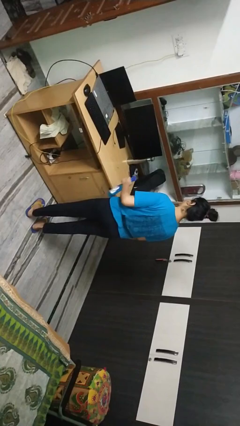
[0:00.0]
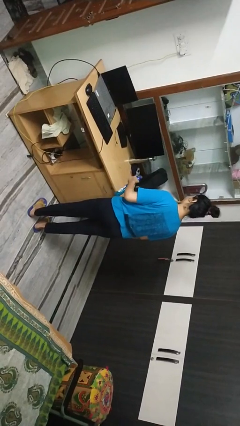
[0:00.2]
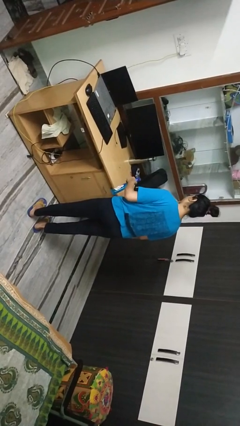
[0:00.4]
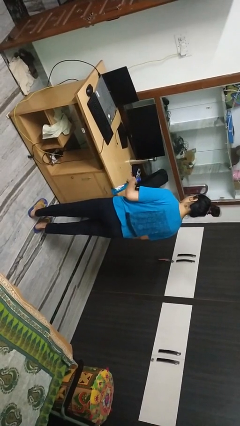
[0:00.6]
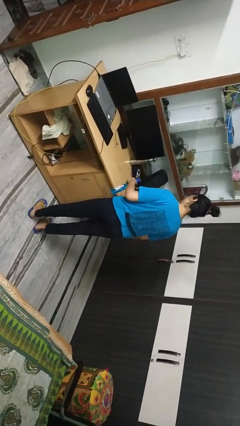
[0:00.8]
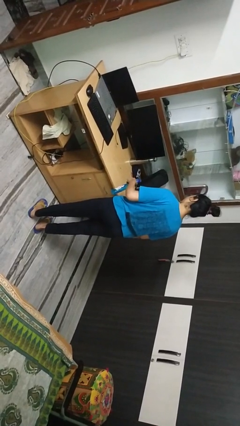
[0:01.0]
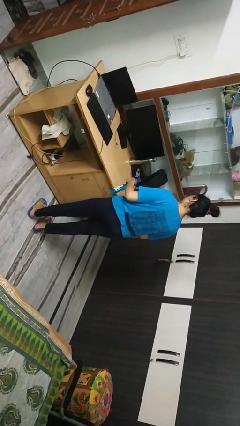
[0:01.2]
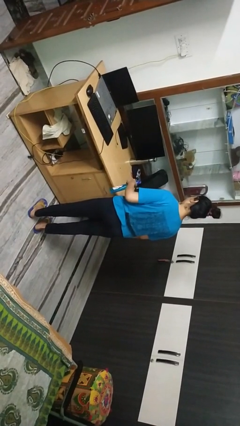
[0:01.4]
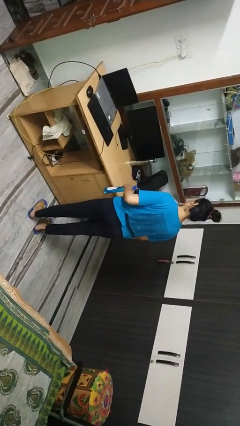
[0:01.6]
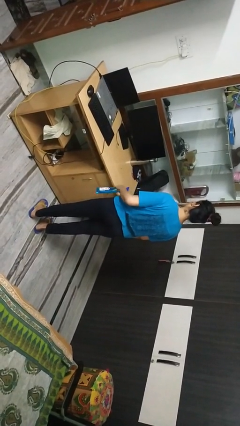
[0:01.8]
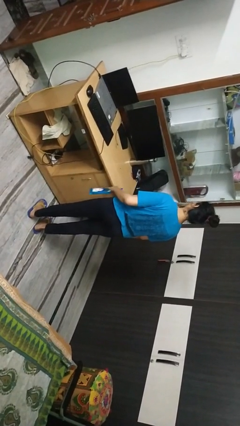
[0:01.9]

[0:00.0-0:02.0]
person sprays from bottle

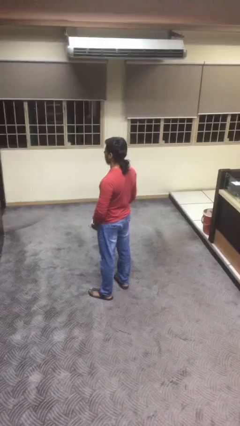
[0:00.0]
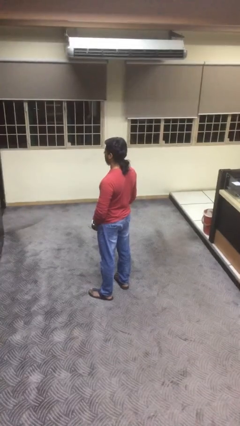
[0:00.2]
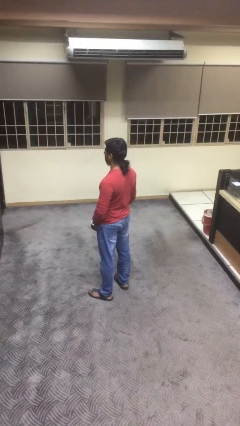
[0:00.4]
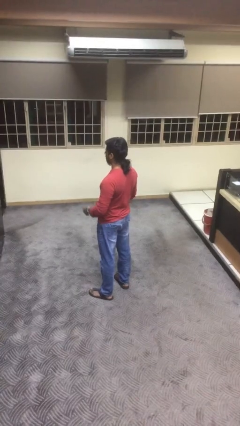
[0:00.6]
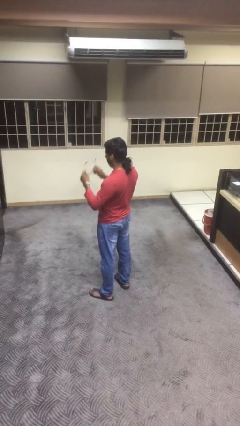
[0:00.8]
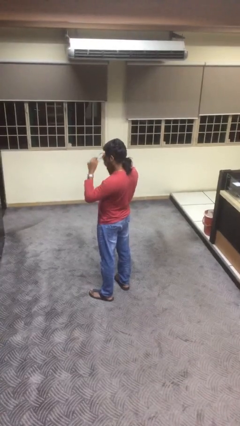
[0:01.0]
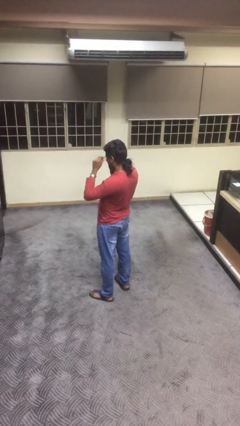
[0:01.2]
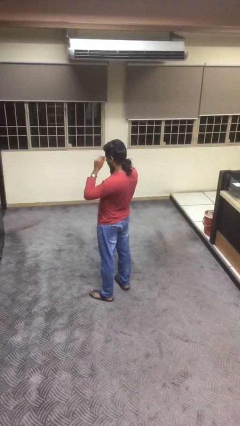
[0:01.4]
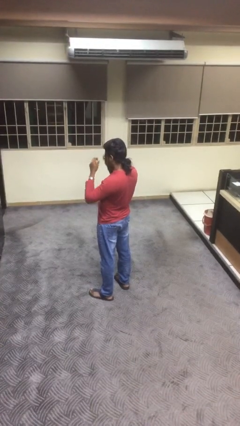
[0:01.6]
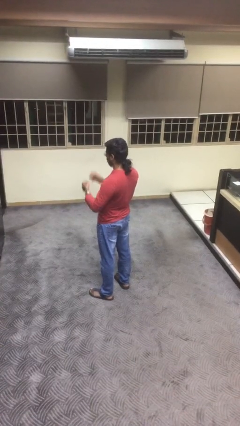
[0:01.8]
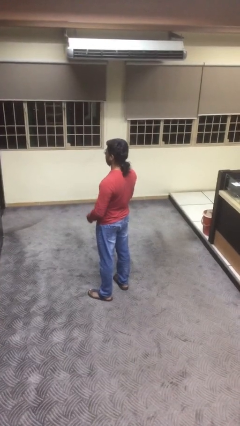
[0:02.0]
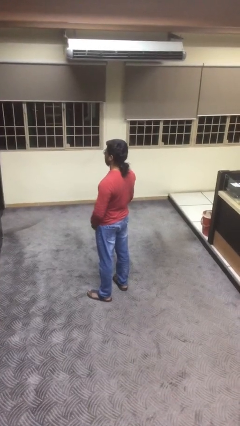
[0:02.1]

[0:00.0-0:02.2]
person puts on glasses

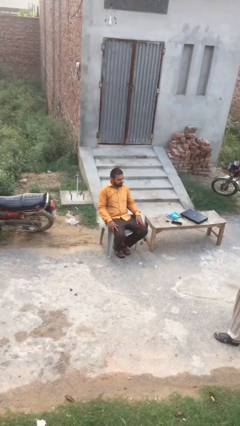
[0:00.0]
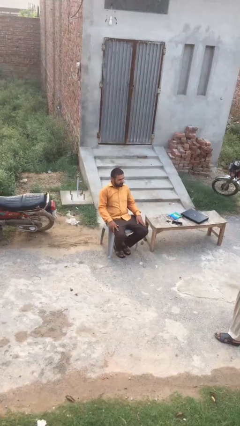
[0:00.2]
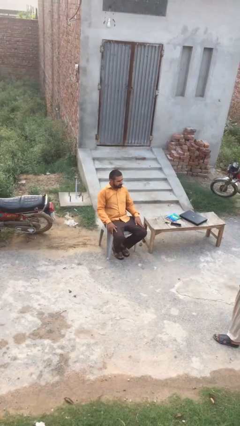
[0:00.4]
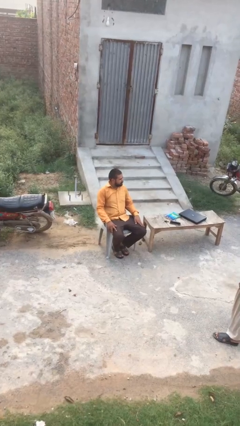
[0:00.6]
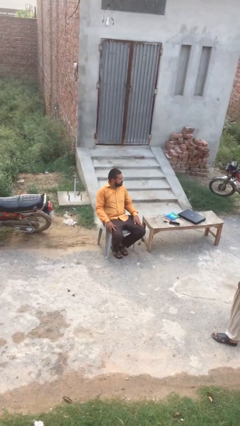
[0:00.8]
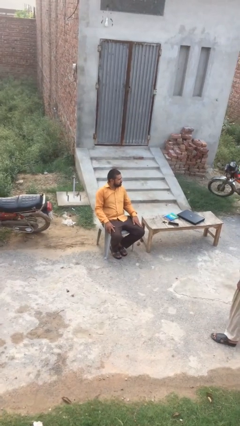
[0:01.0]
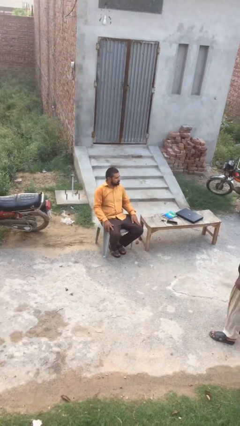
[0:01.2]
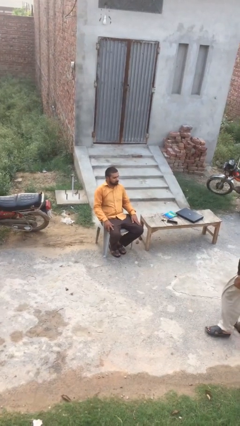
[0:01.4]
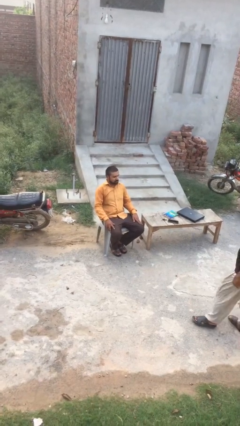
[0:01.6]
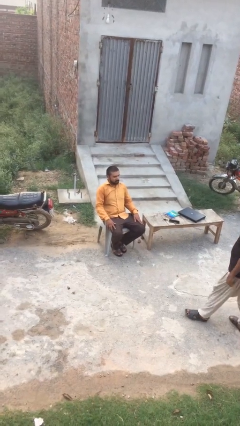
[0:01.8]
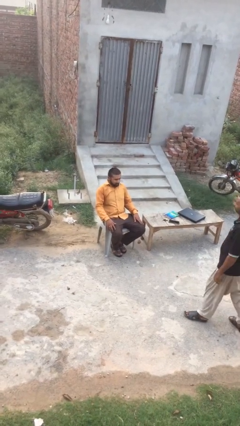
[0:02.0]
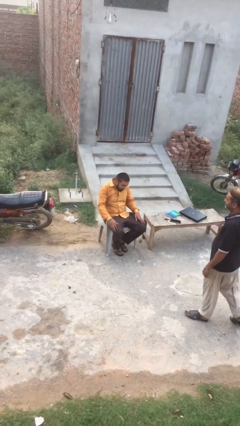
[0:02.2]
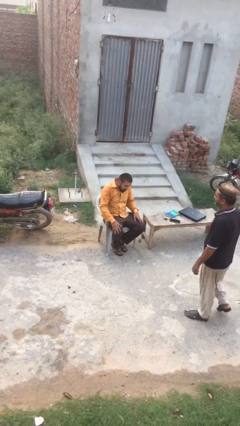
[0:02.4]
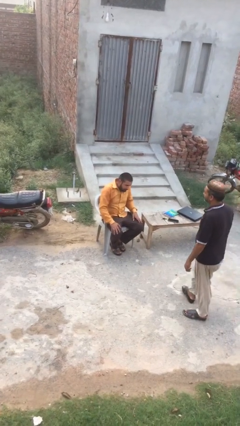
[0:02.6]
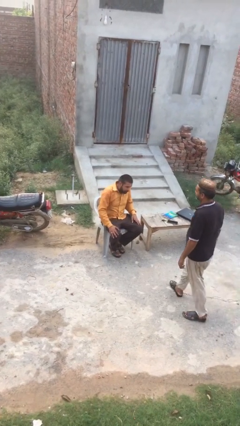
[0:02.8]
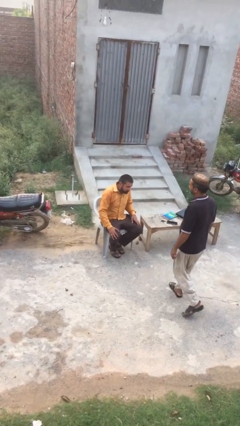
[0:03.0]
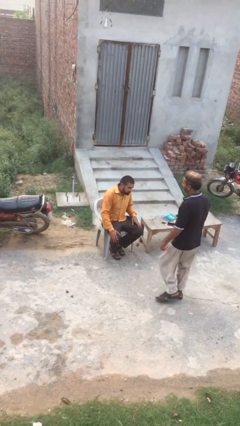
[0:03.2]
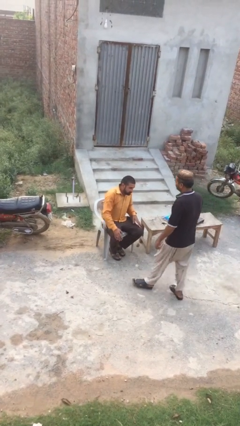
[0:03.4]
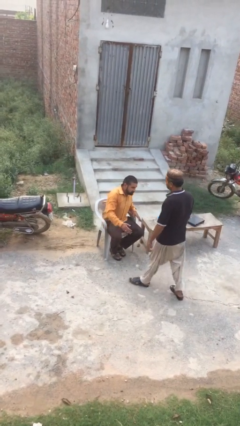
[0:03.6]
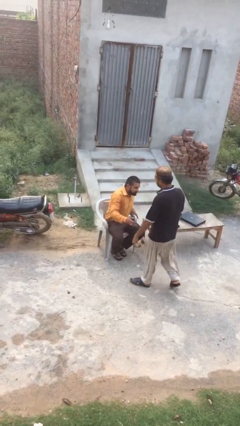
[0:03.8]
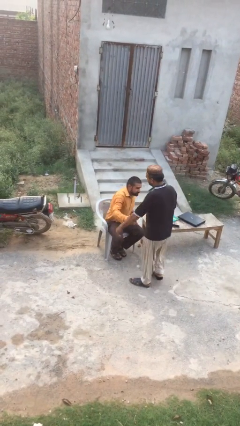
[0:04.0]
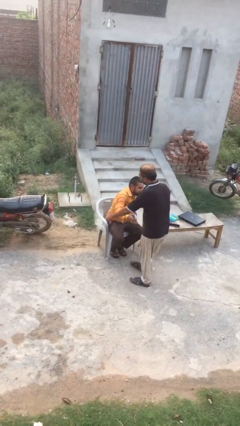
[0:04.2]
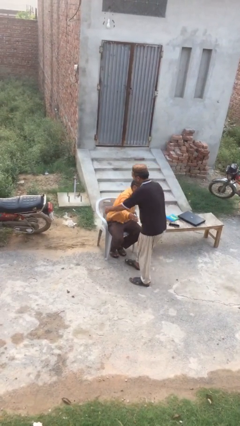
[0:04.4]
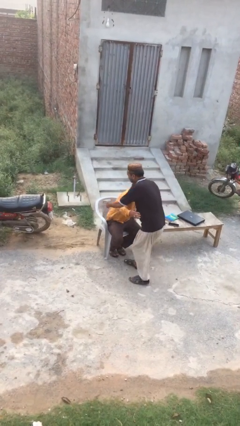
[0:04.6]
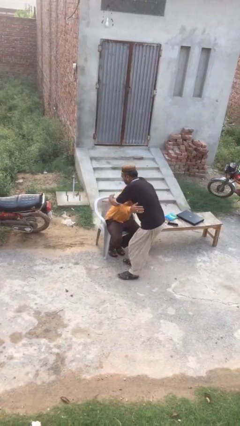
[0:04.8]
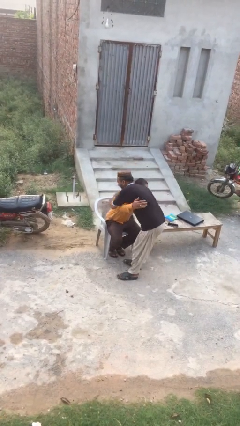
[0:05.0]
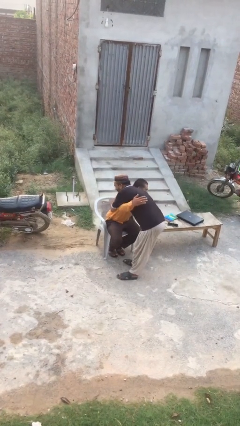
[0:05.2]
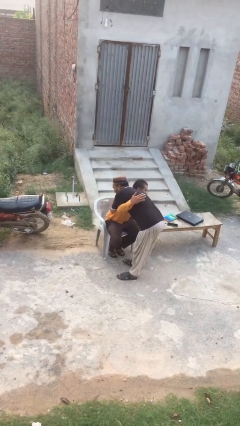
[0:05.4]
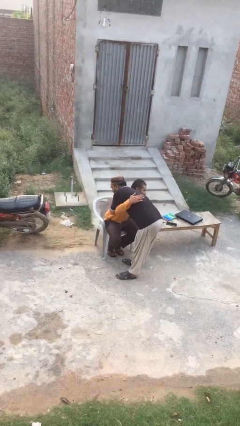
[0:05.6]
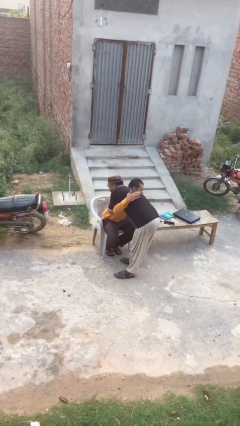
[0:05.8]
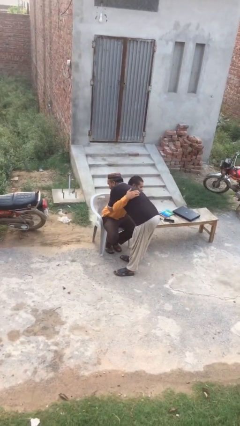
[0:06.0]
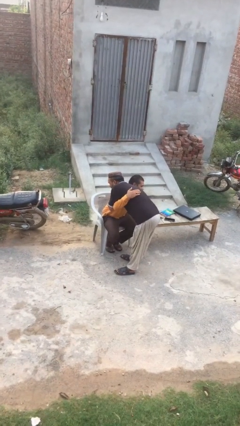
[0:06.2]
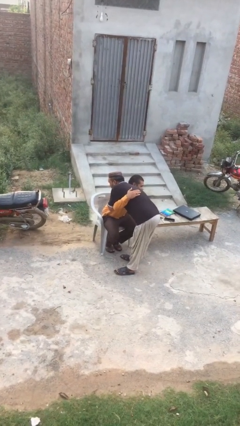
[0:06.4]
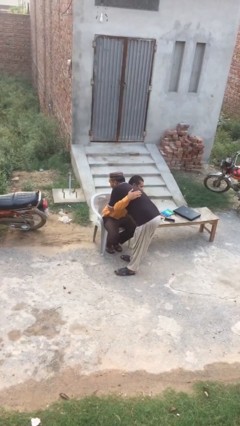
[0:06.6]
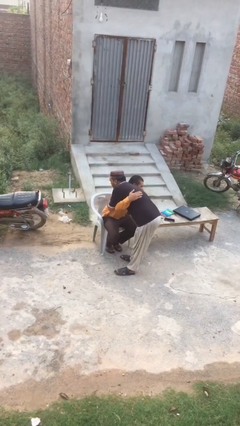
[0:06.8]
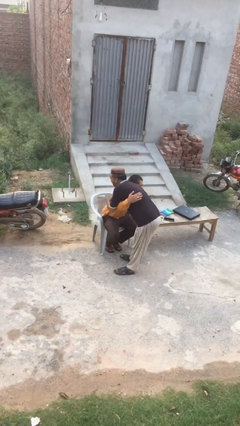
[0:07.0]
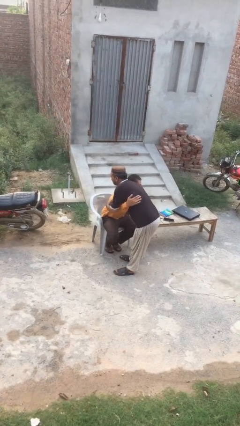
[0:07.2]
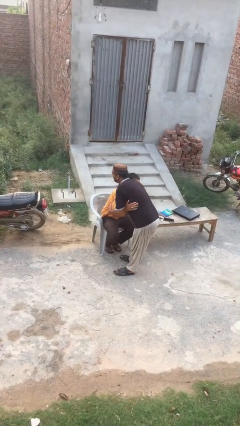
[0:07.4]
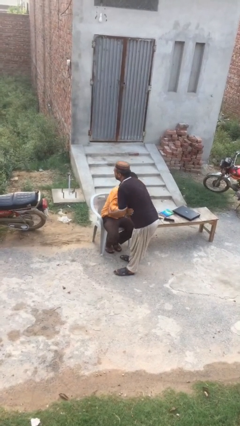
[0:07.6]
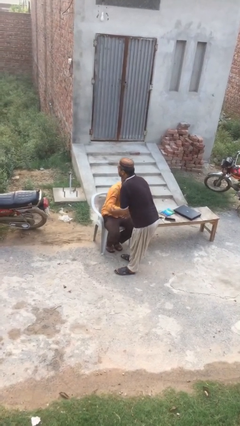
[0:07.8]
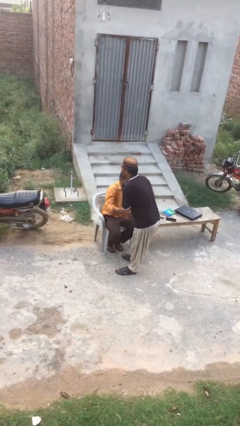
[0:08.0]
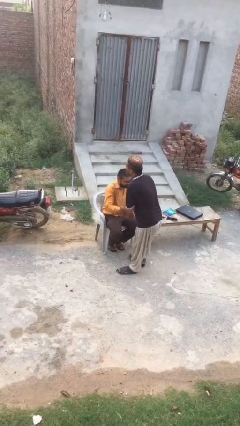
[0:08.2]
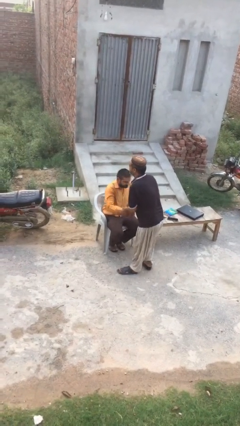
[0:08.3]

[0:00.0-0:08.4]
person embraces person

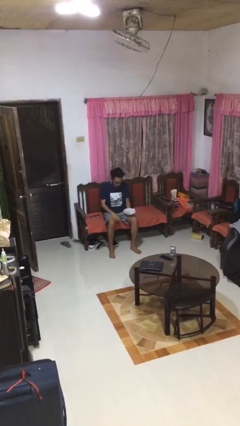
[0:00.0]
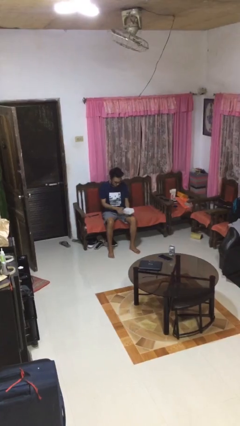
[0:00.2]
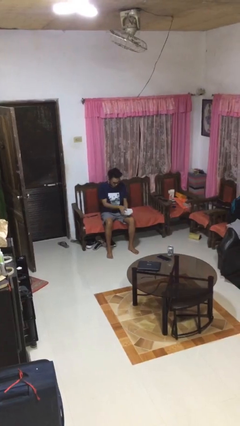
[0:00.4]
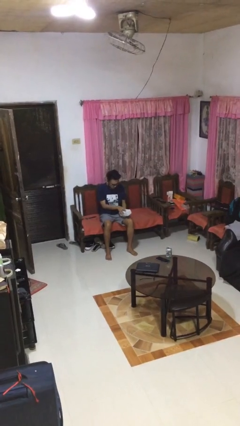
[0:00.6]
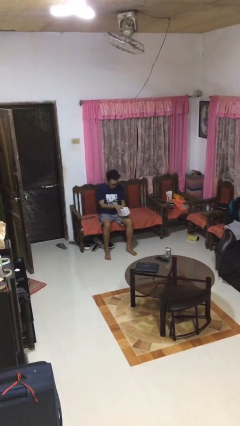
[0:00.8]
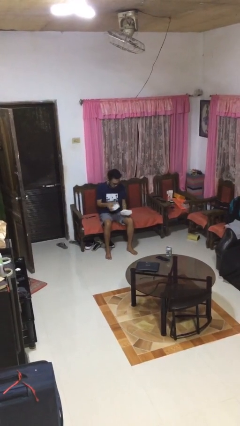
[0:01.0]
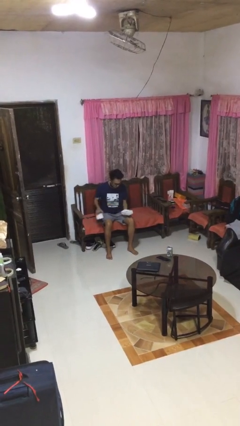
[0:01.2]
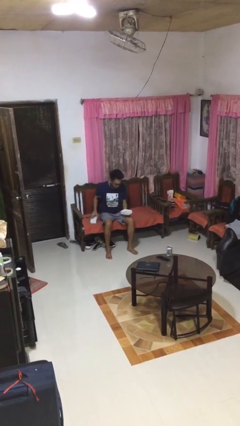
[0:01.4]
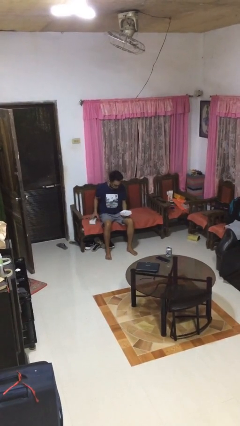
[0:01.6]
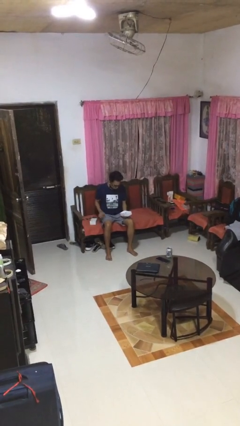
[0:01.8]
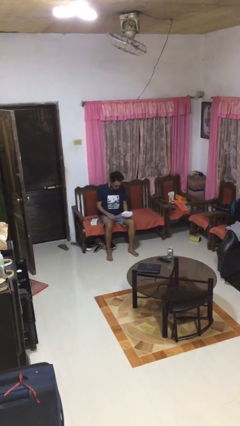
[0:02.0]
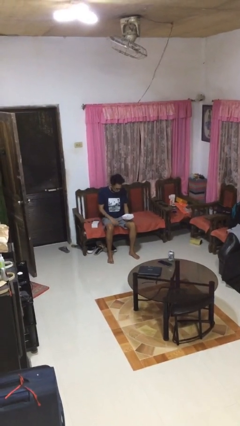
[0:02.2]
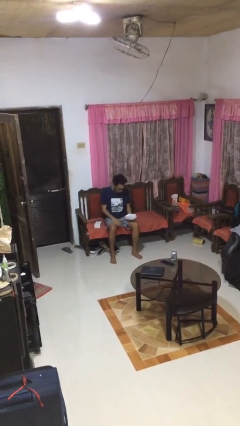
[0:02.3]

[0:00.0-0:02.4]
person opens jewelry box

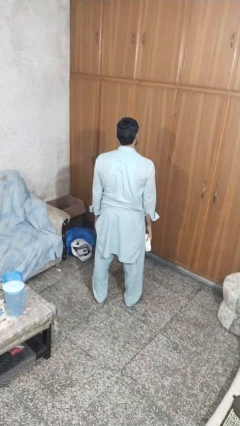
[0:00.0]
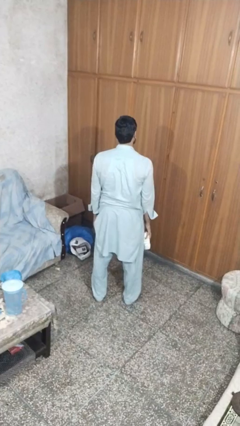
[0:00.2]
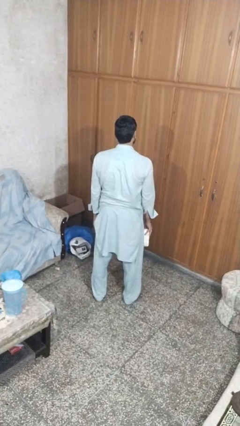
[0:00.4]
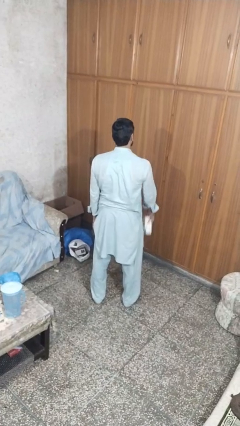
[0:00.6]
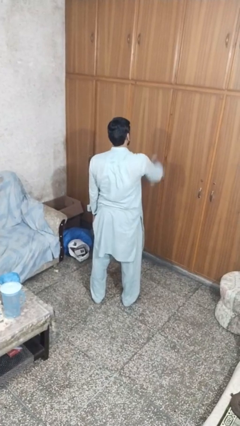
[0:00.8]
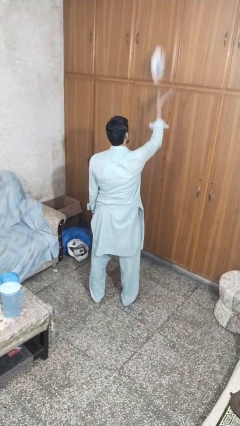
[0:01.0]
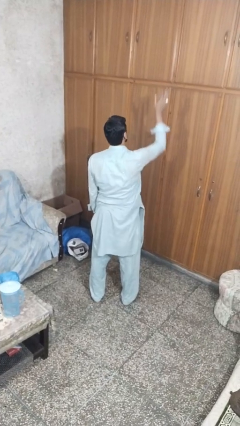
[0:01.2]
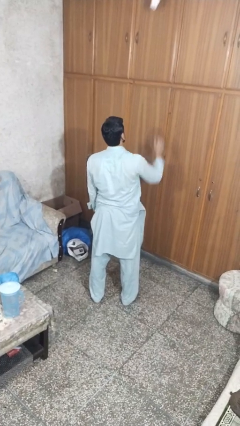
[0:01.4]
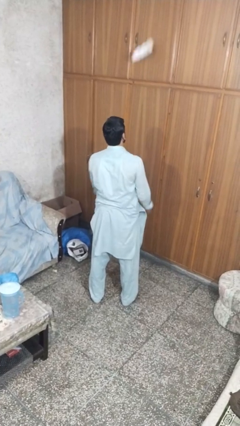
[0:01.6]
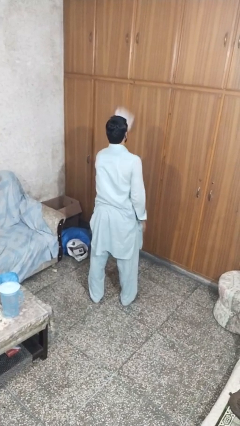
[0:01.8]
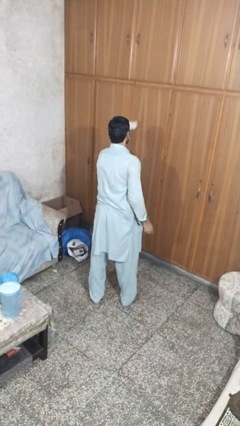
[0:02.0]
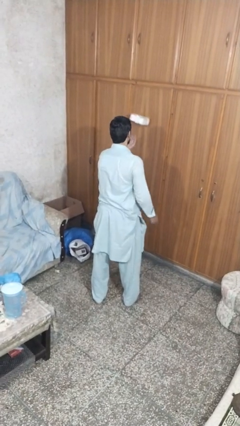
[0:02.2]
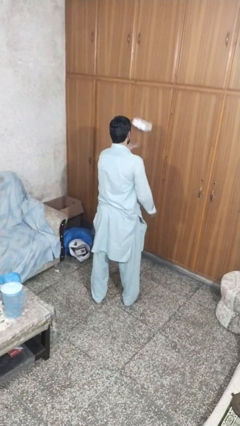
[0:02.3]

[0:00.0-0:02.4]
person drops object

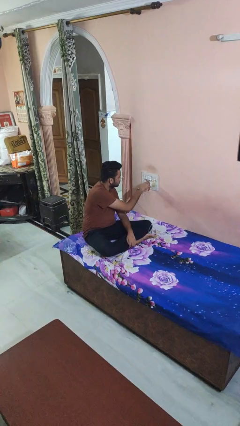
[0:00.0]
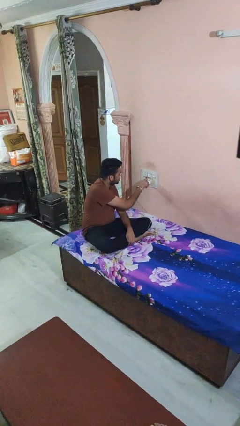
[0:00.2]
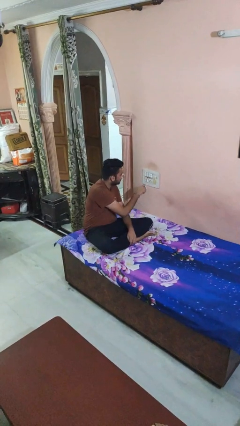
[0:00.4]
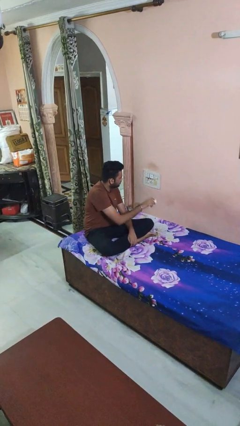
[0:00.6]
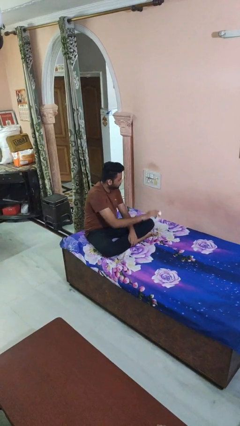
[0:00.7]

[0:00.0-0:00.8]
person unplugs from electrical socket
